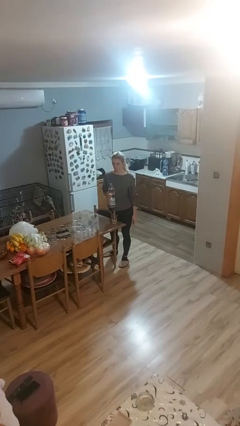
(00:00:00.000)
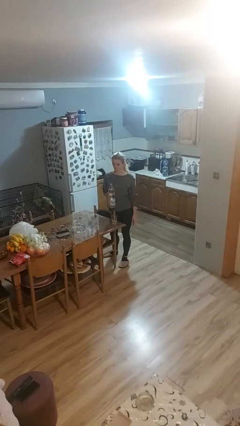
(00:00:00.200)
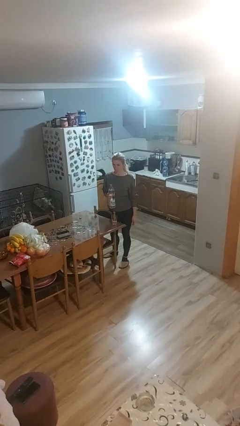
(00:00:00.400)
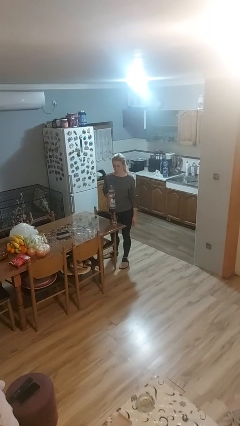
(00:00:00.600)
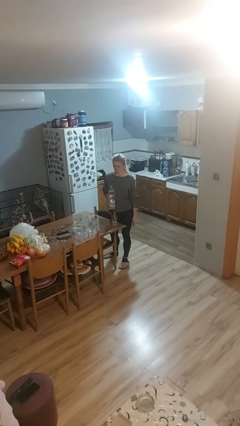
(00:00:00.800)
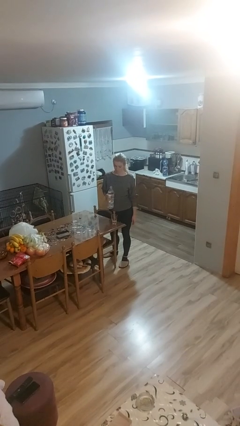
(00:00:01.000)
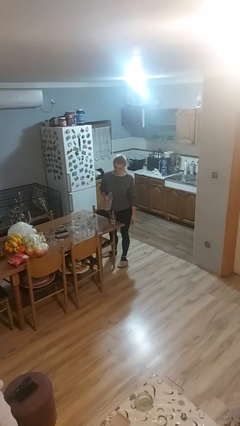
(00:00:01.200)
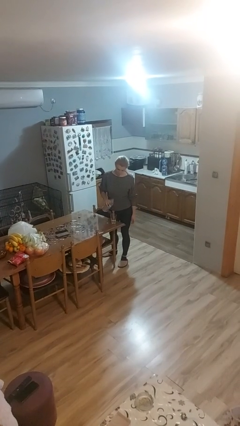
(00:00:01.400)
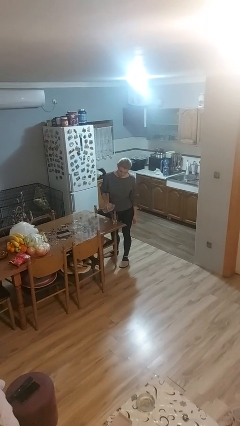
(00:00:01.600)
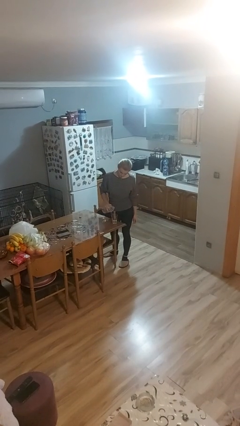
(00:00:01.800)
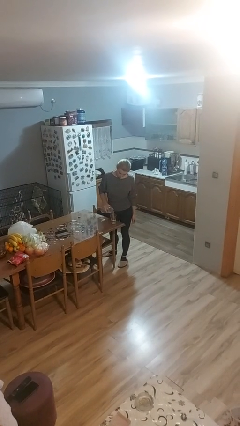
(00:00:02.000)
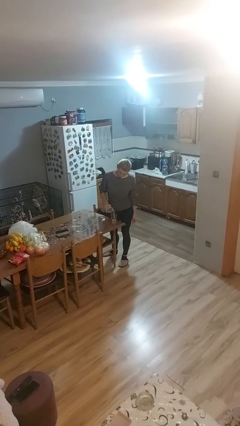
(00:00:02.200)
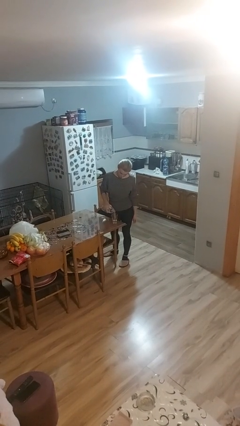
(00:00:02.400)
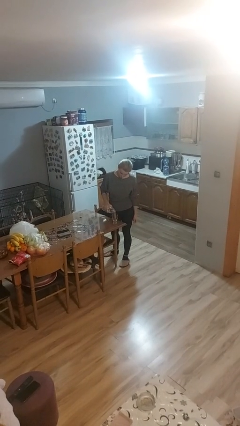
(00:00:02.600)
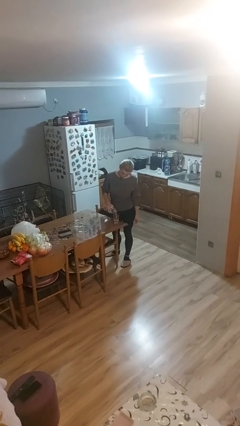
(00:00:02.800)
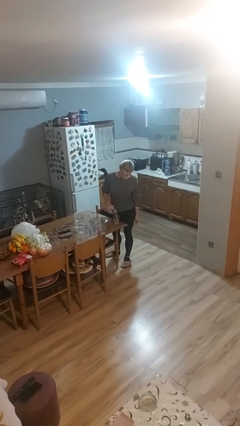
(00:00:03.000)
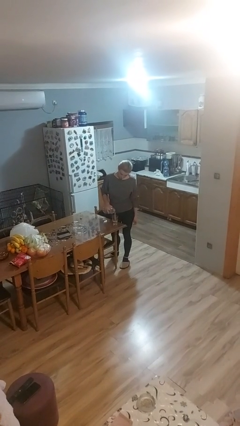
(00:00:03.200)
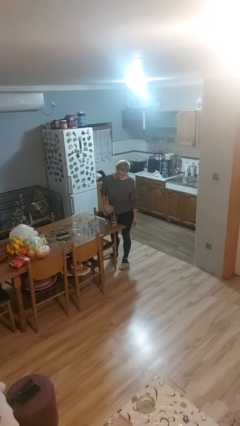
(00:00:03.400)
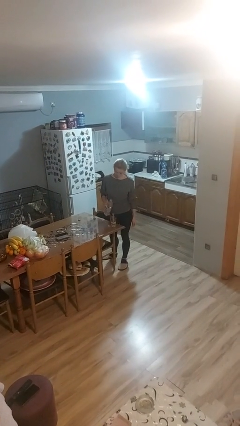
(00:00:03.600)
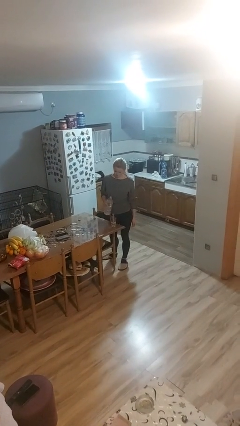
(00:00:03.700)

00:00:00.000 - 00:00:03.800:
person pours liquid into cup

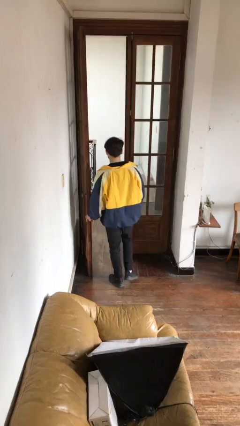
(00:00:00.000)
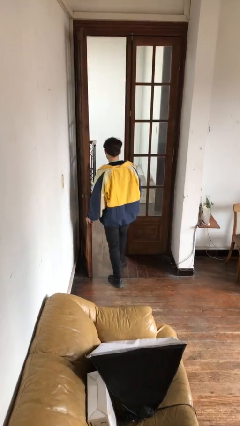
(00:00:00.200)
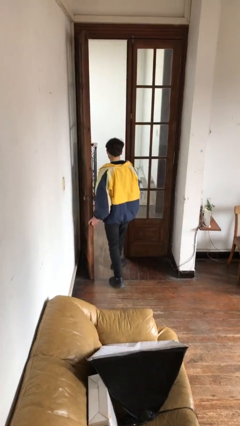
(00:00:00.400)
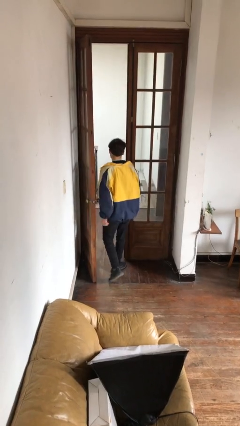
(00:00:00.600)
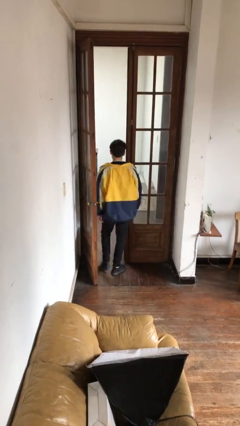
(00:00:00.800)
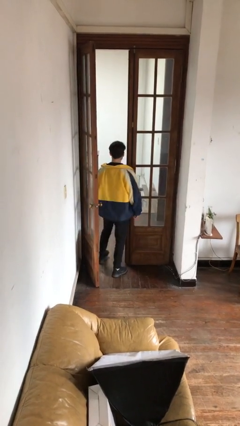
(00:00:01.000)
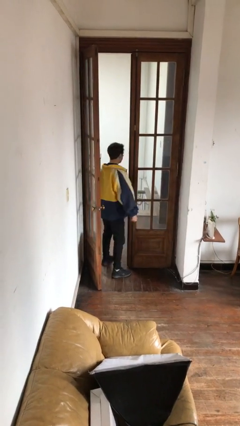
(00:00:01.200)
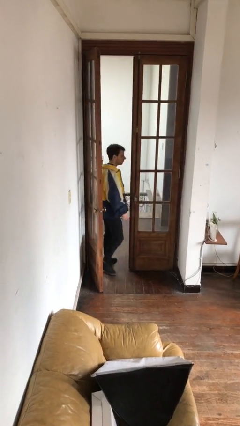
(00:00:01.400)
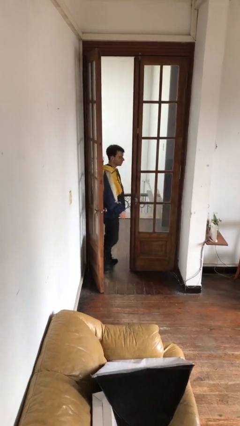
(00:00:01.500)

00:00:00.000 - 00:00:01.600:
person exits scene through structure

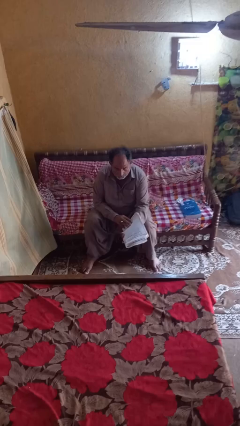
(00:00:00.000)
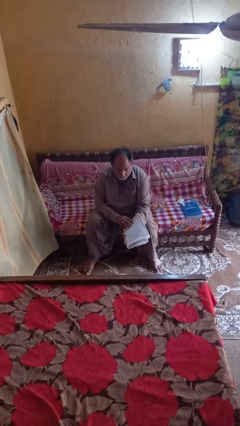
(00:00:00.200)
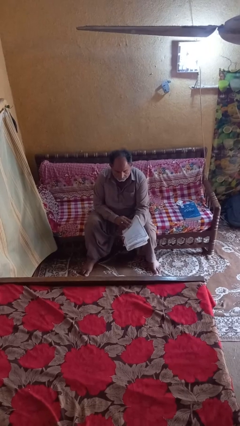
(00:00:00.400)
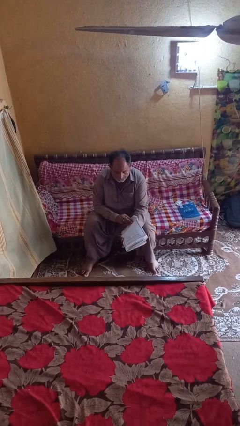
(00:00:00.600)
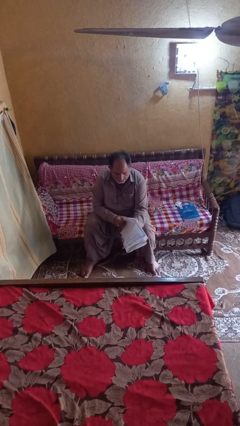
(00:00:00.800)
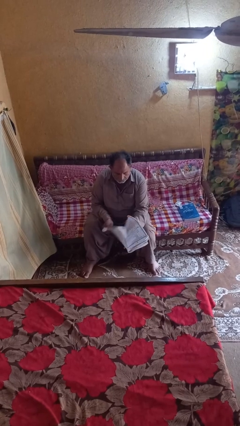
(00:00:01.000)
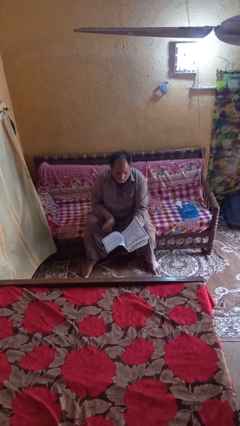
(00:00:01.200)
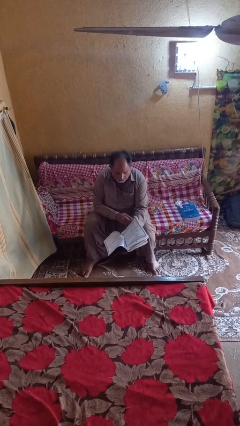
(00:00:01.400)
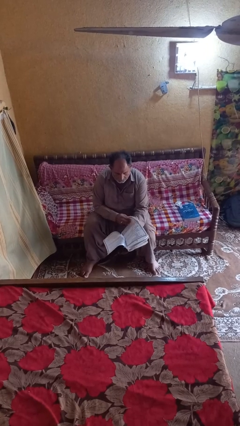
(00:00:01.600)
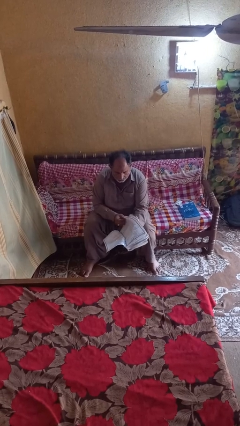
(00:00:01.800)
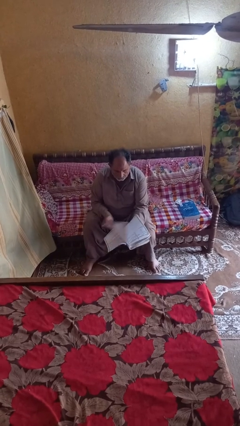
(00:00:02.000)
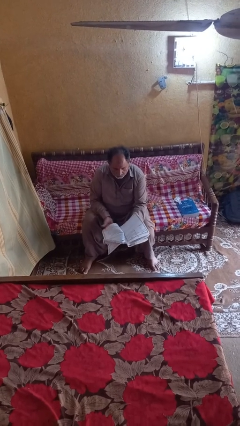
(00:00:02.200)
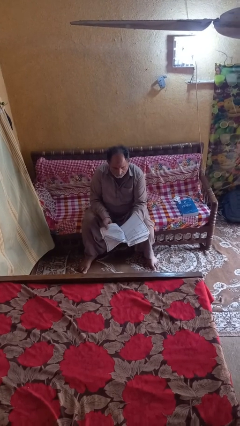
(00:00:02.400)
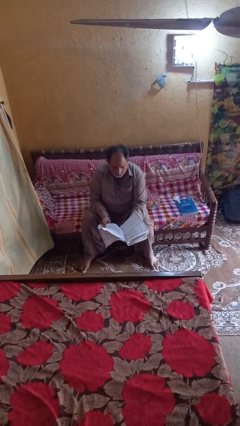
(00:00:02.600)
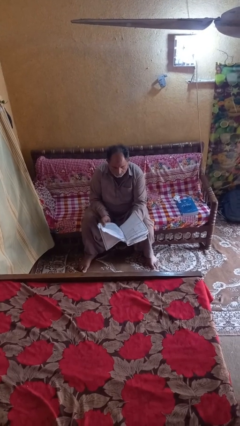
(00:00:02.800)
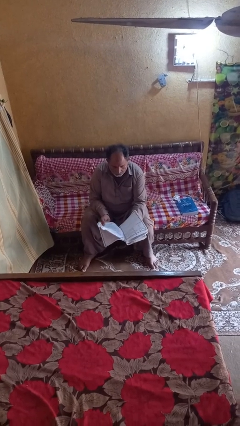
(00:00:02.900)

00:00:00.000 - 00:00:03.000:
person reads magazine

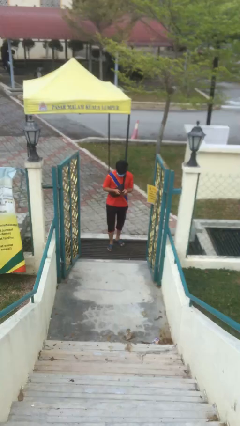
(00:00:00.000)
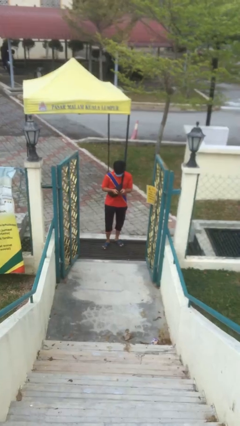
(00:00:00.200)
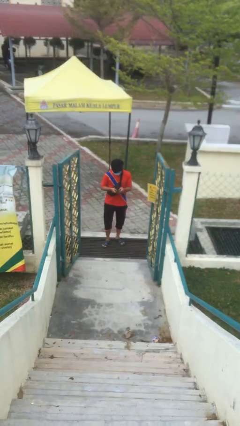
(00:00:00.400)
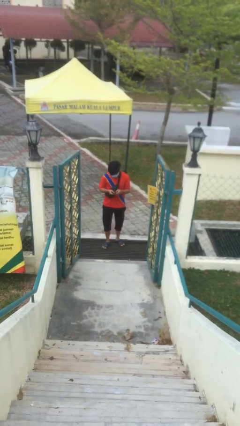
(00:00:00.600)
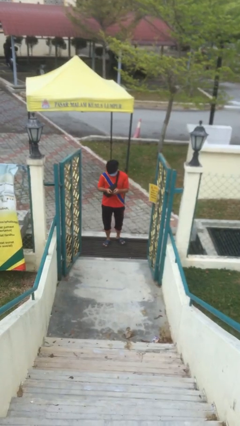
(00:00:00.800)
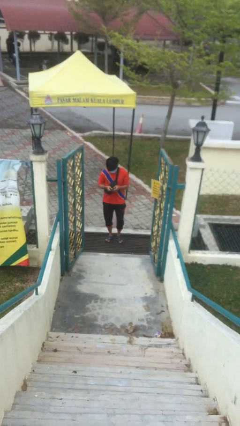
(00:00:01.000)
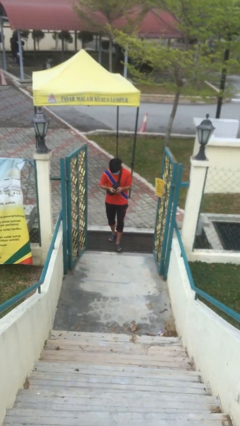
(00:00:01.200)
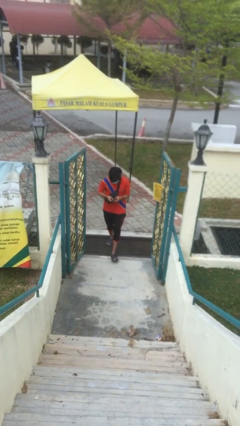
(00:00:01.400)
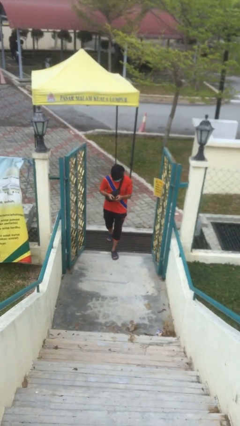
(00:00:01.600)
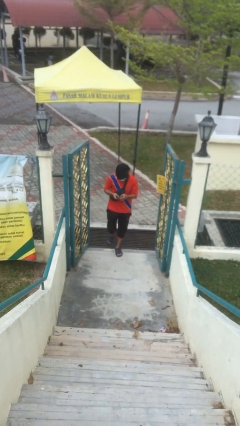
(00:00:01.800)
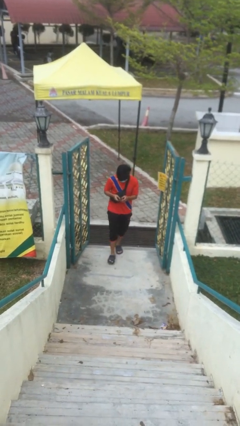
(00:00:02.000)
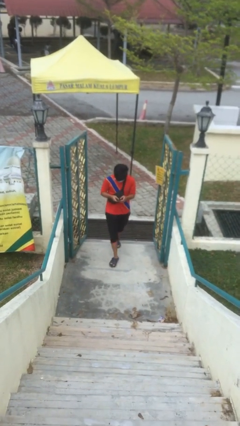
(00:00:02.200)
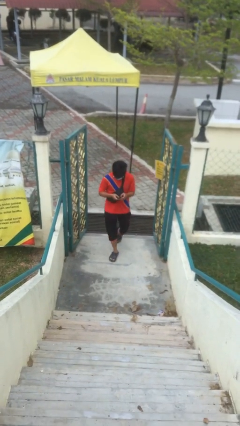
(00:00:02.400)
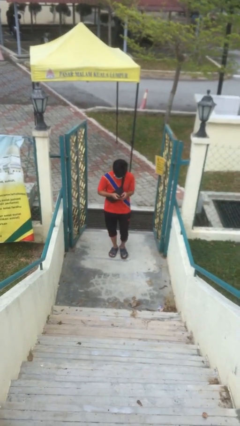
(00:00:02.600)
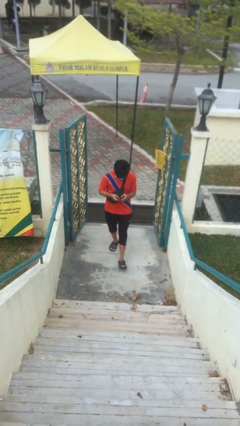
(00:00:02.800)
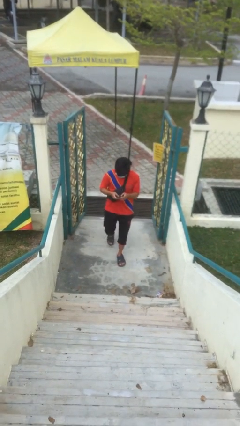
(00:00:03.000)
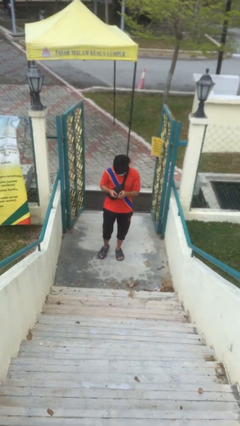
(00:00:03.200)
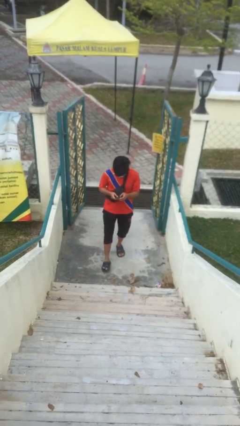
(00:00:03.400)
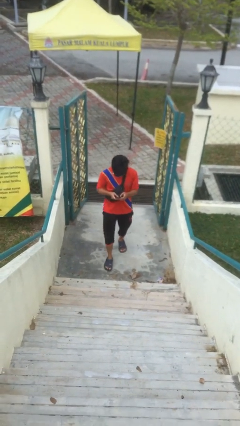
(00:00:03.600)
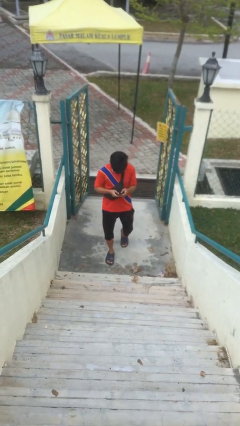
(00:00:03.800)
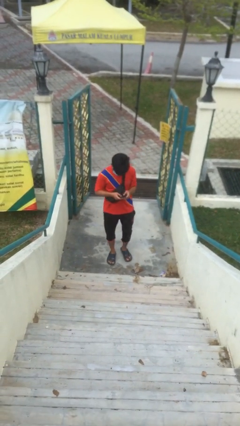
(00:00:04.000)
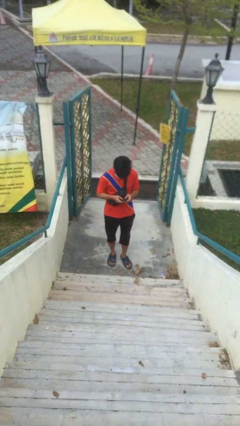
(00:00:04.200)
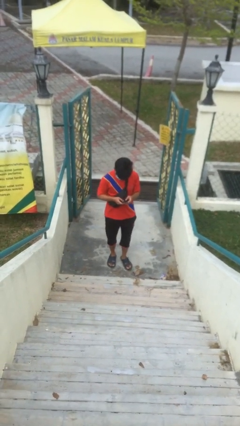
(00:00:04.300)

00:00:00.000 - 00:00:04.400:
person enters scene through structure

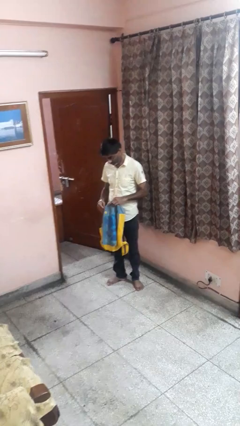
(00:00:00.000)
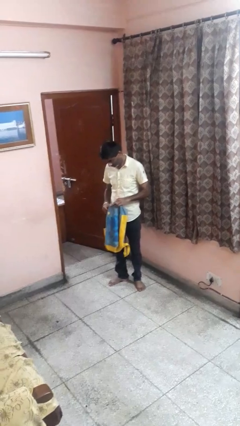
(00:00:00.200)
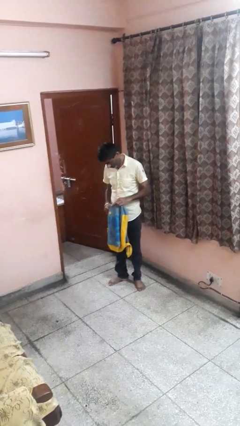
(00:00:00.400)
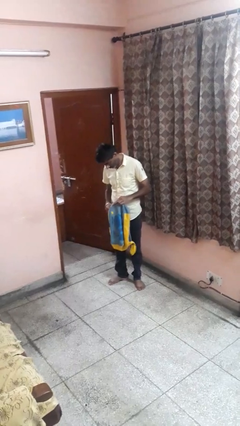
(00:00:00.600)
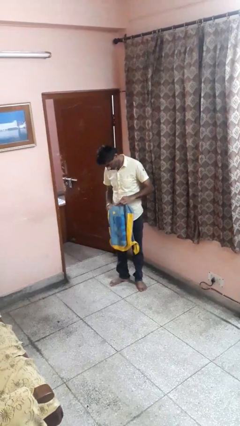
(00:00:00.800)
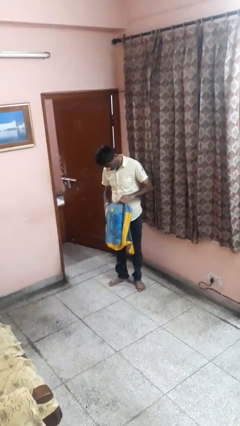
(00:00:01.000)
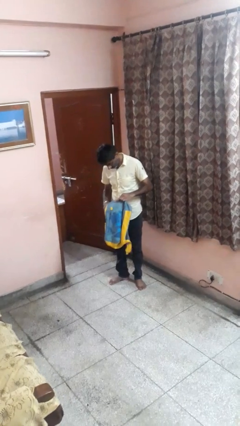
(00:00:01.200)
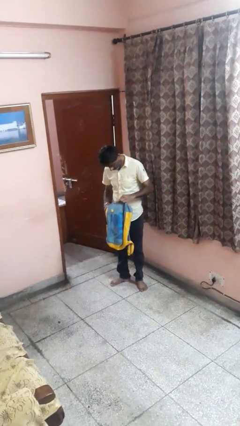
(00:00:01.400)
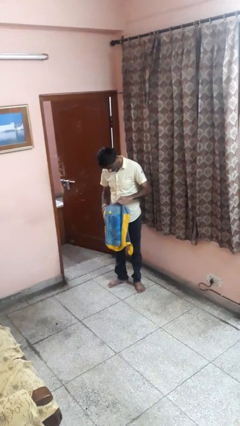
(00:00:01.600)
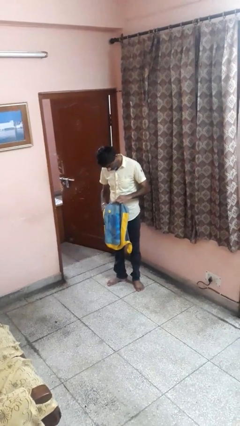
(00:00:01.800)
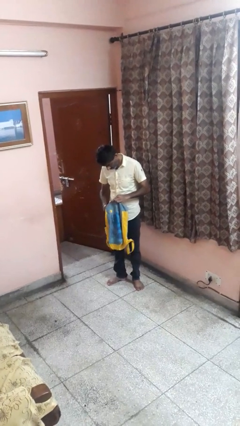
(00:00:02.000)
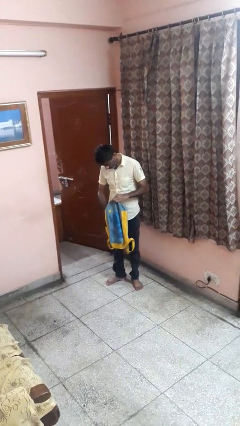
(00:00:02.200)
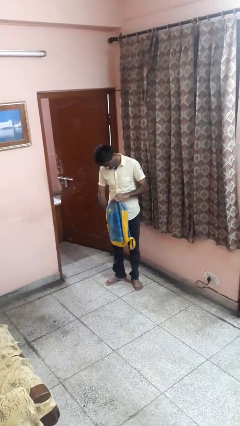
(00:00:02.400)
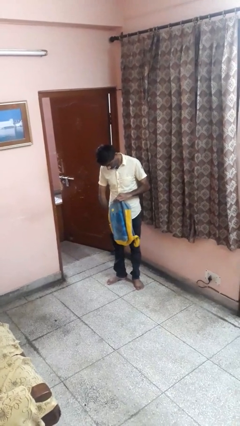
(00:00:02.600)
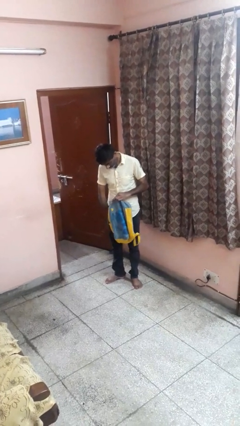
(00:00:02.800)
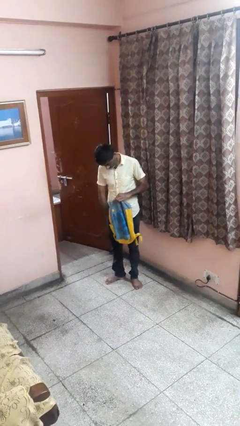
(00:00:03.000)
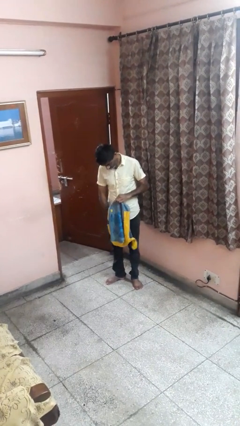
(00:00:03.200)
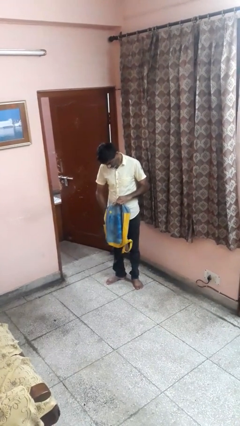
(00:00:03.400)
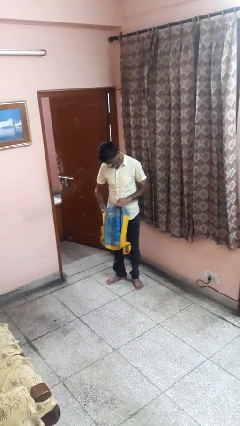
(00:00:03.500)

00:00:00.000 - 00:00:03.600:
person searches in backpack

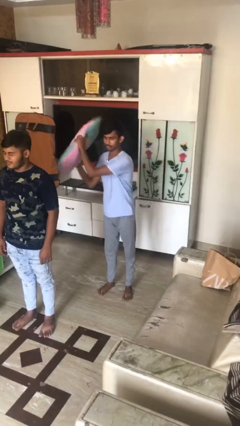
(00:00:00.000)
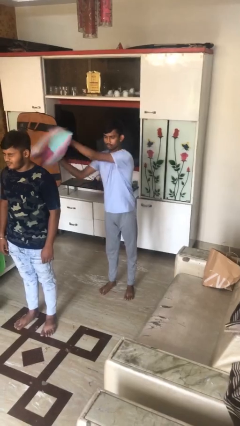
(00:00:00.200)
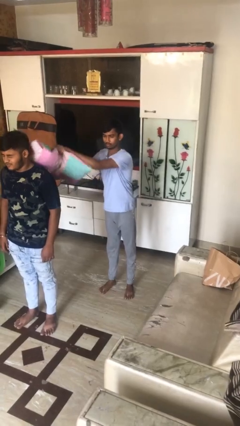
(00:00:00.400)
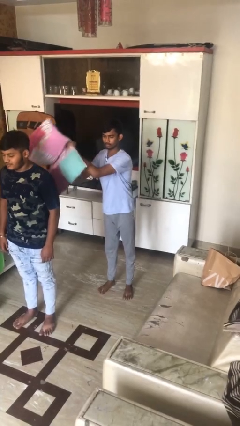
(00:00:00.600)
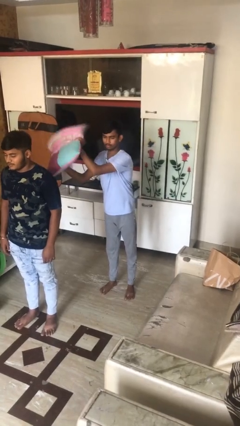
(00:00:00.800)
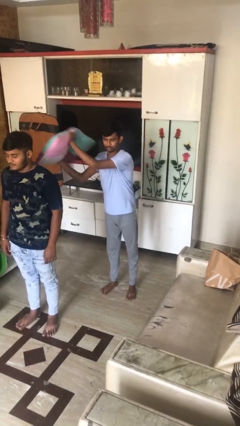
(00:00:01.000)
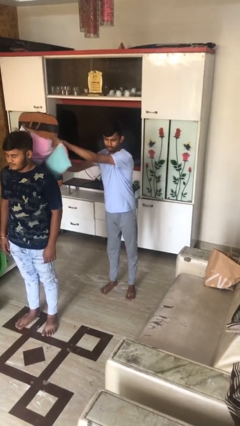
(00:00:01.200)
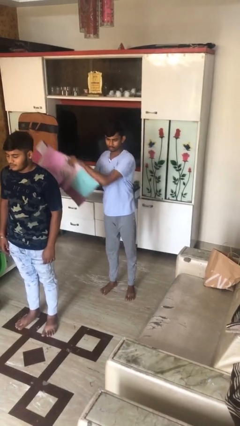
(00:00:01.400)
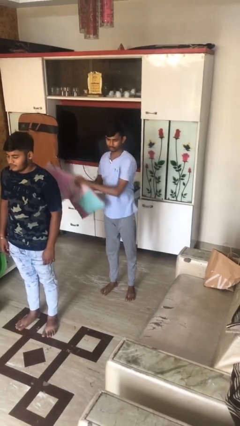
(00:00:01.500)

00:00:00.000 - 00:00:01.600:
person hits person with pillow
